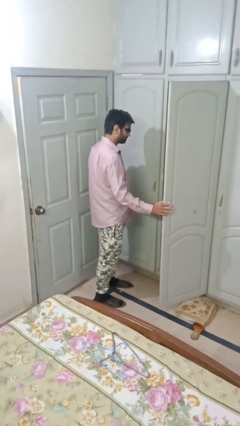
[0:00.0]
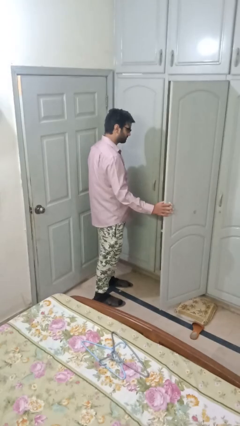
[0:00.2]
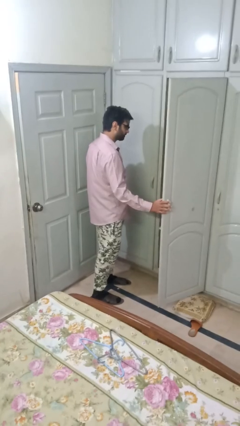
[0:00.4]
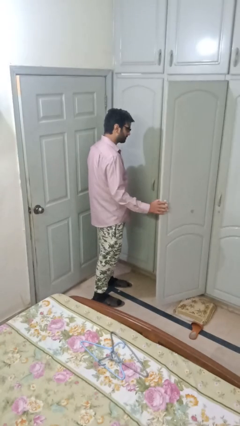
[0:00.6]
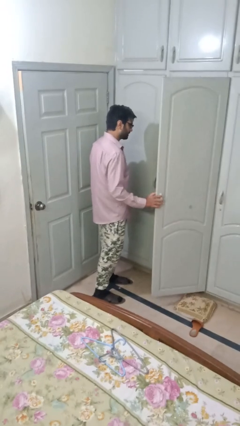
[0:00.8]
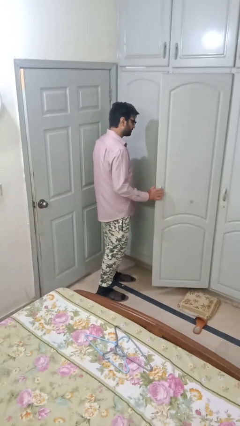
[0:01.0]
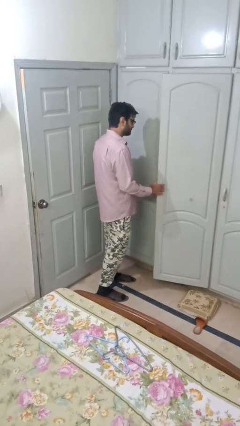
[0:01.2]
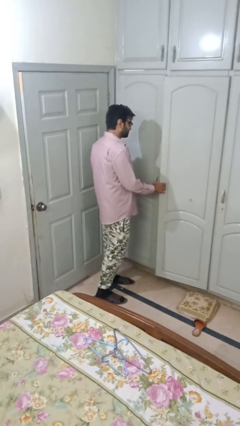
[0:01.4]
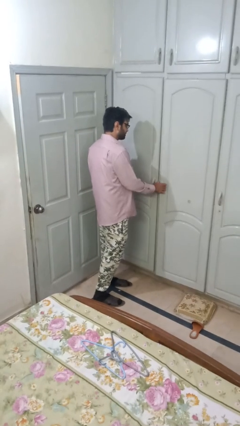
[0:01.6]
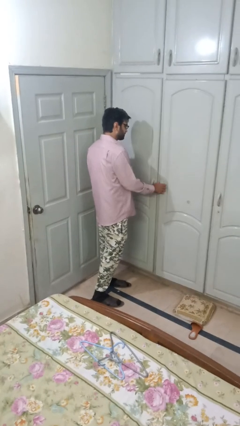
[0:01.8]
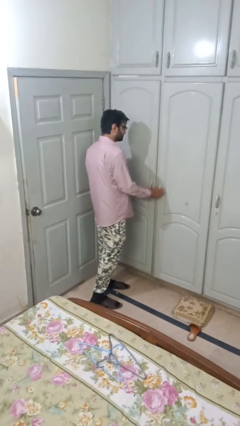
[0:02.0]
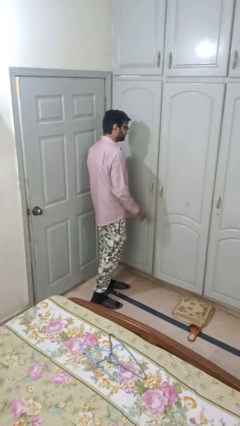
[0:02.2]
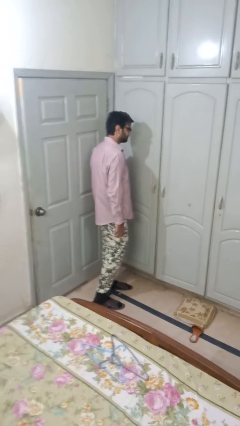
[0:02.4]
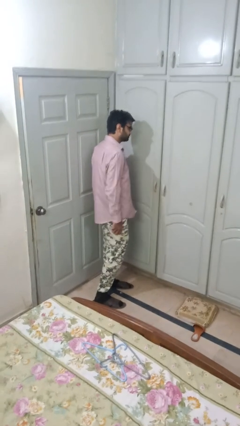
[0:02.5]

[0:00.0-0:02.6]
person closes closet door

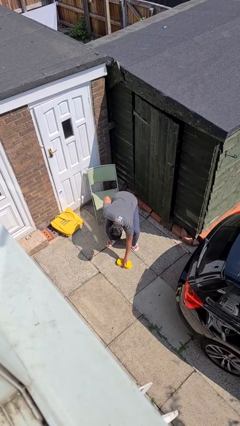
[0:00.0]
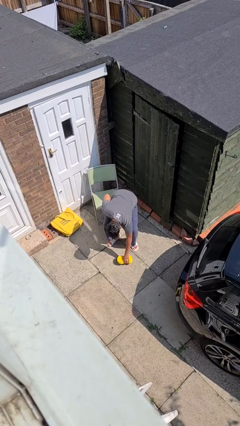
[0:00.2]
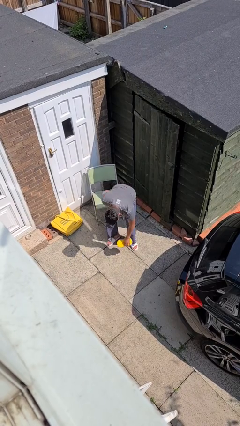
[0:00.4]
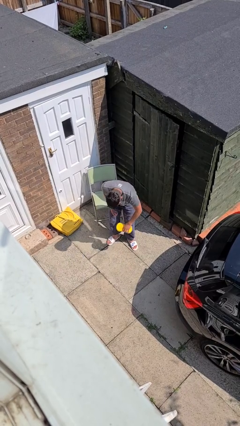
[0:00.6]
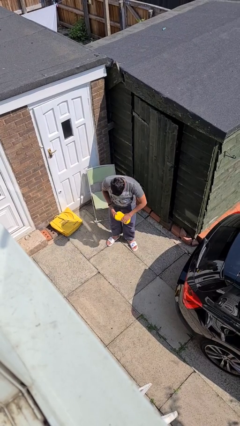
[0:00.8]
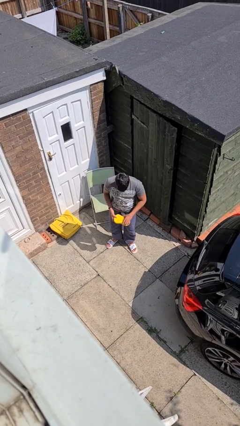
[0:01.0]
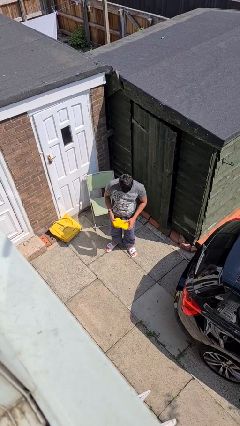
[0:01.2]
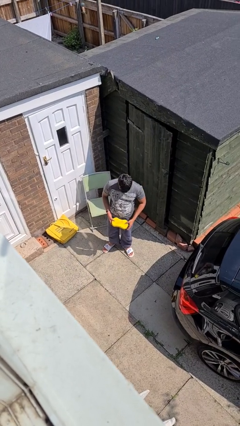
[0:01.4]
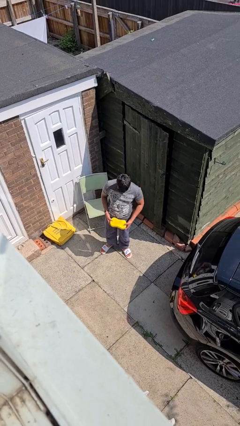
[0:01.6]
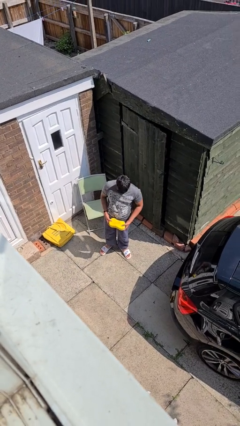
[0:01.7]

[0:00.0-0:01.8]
person picks up object from floor

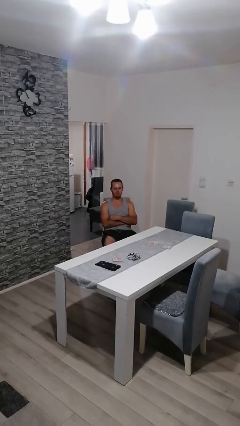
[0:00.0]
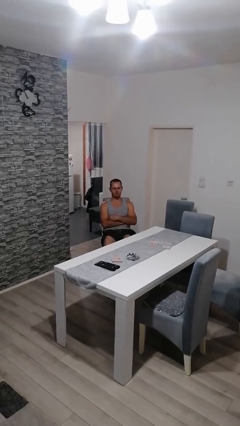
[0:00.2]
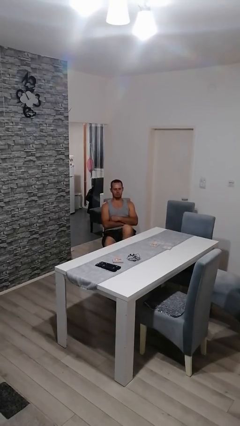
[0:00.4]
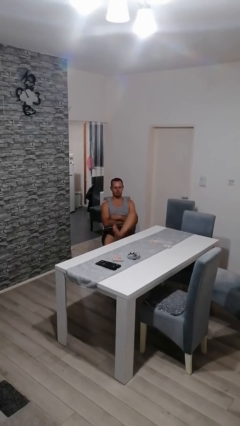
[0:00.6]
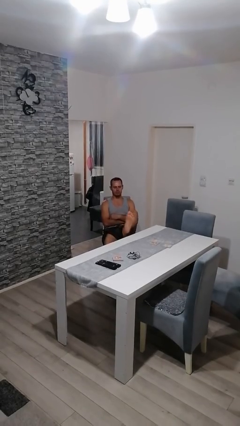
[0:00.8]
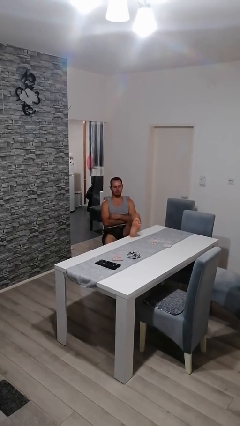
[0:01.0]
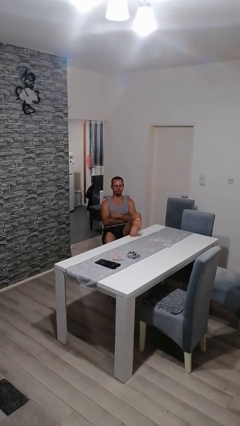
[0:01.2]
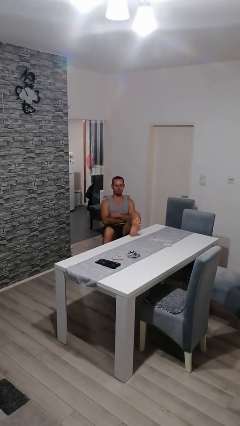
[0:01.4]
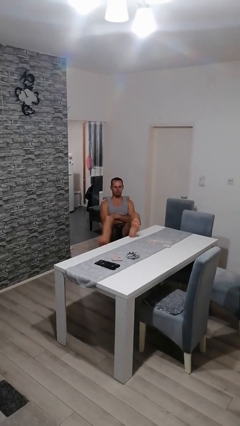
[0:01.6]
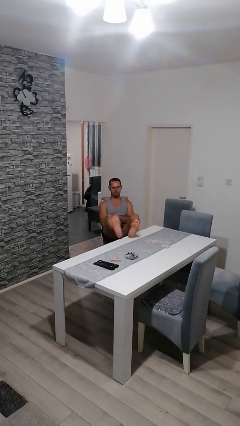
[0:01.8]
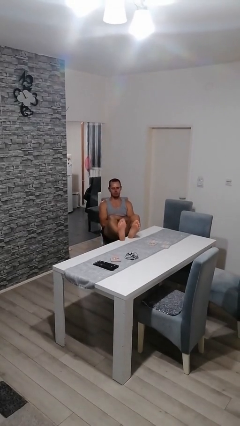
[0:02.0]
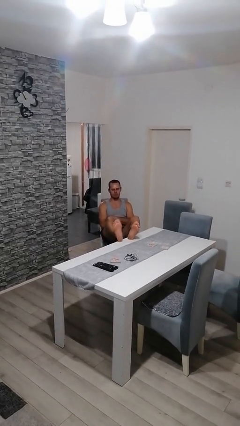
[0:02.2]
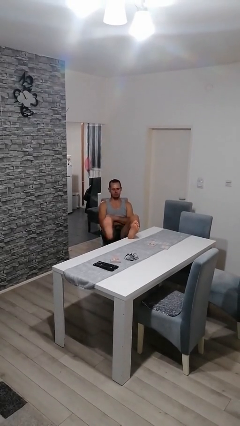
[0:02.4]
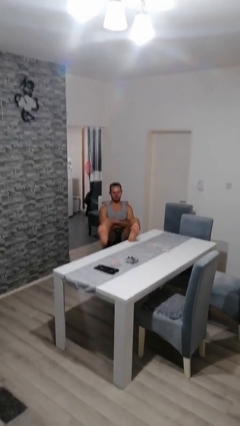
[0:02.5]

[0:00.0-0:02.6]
person puts feet up

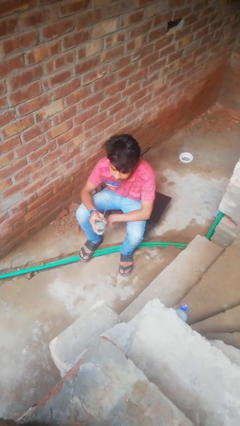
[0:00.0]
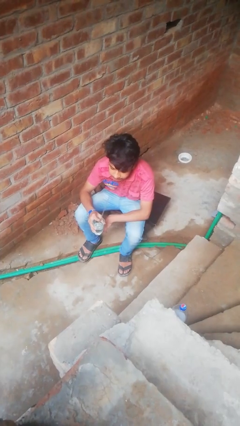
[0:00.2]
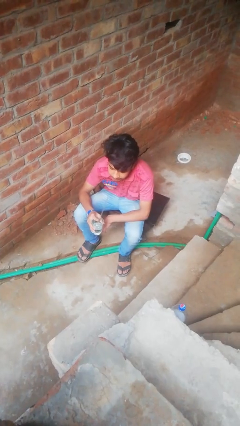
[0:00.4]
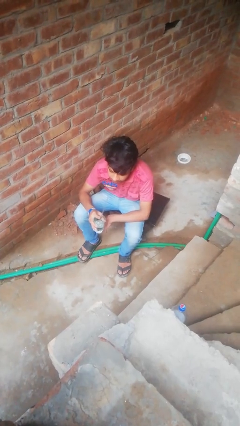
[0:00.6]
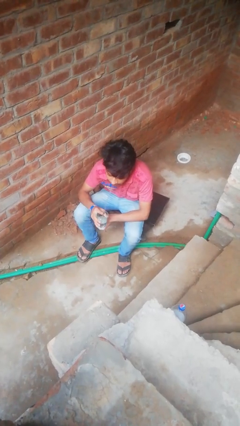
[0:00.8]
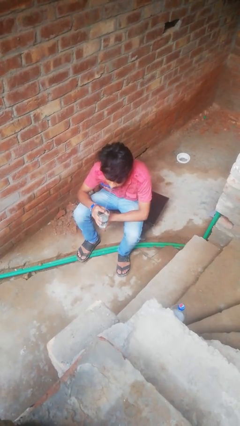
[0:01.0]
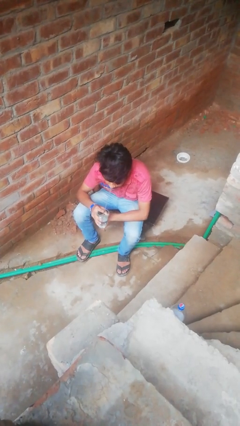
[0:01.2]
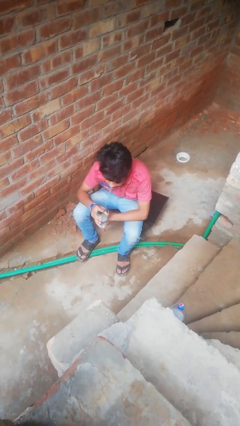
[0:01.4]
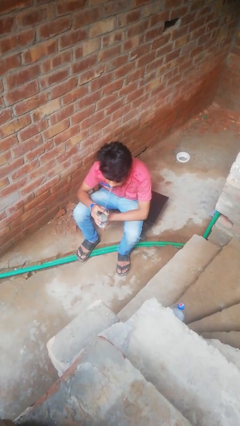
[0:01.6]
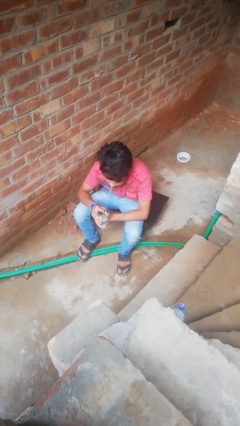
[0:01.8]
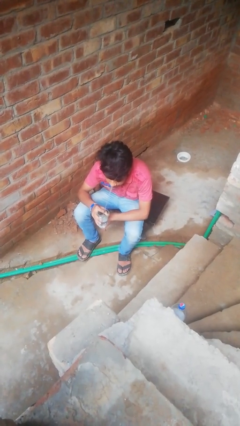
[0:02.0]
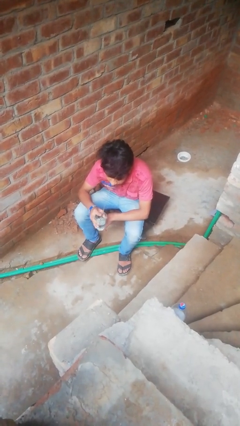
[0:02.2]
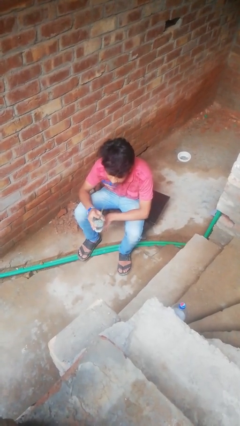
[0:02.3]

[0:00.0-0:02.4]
person drinks from straw

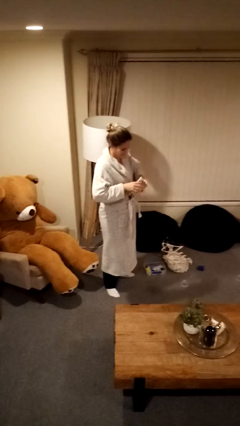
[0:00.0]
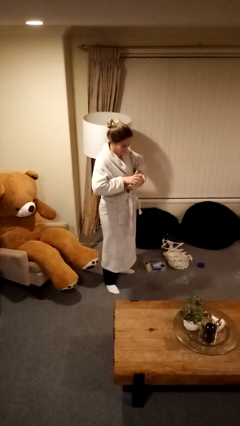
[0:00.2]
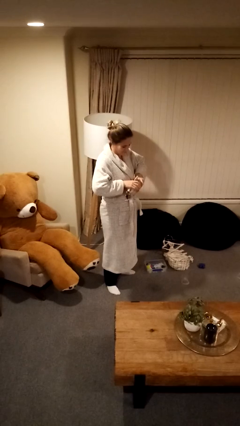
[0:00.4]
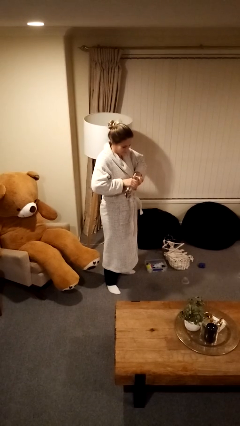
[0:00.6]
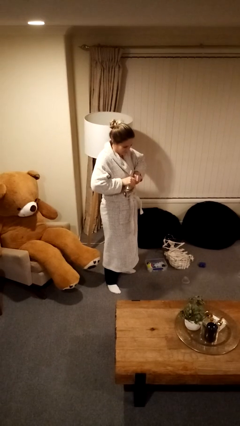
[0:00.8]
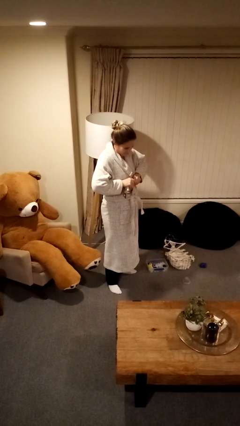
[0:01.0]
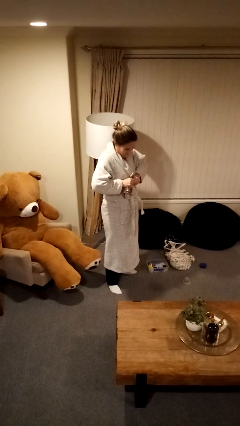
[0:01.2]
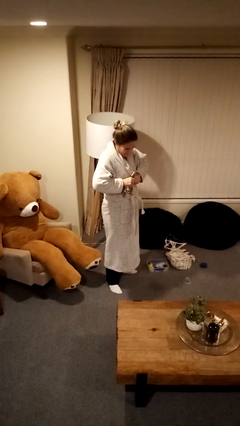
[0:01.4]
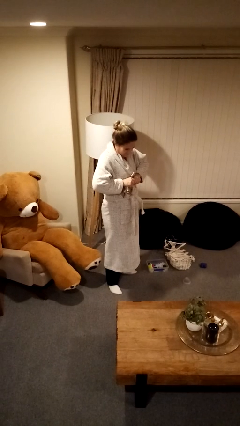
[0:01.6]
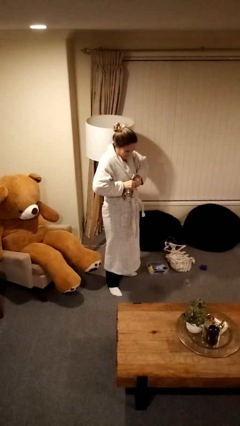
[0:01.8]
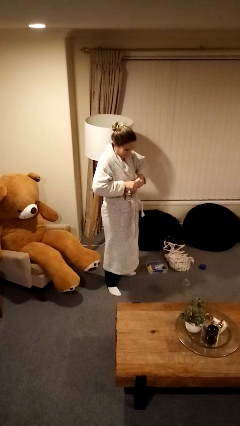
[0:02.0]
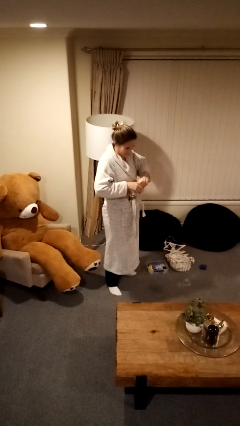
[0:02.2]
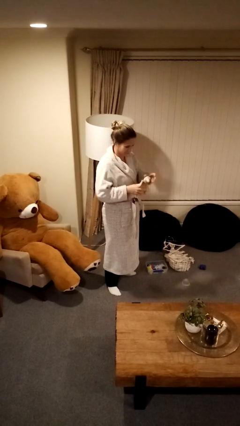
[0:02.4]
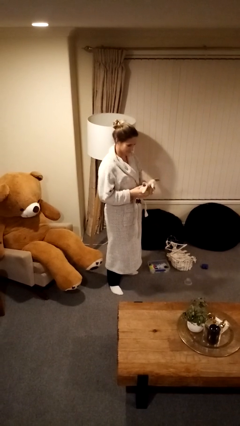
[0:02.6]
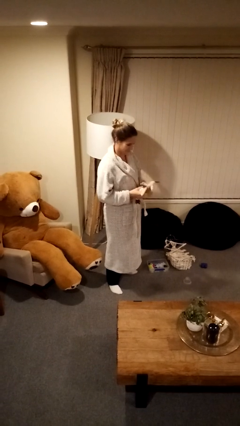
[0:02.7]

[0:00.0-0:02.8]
person squeezes object

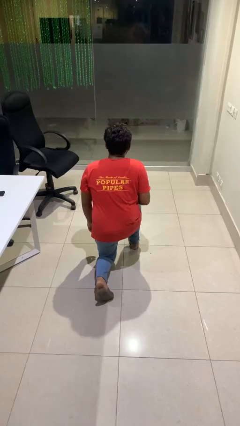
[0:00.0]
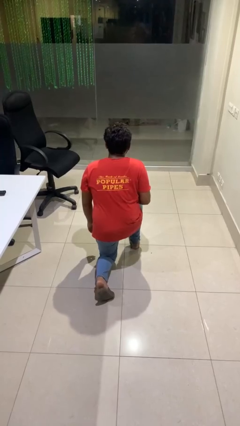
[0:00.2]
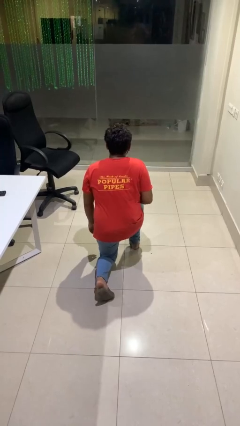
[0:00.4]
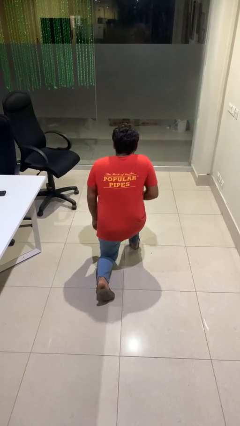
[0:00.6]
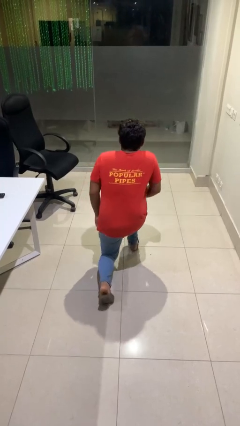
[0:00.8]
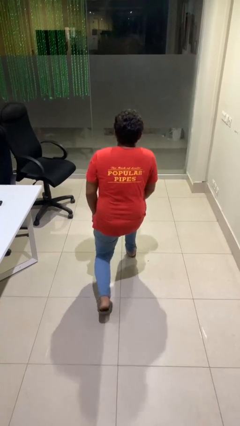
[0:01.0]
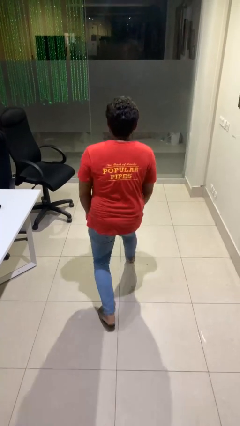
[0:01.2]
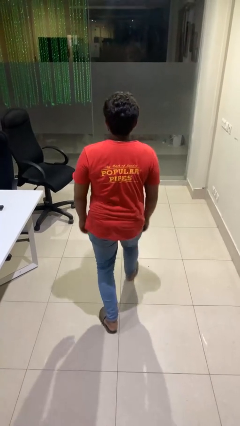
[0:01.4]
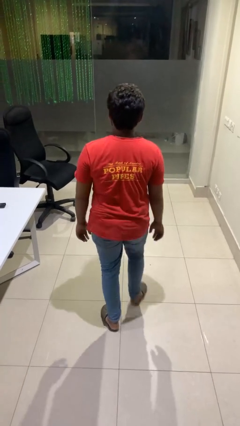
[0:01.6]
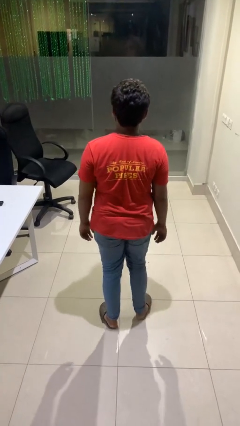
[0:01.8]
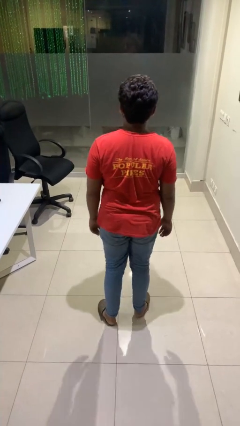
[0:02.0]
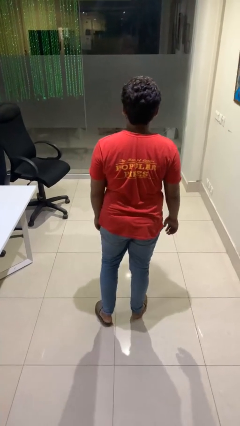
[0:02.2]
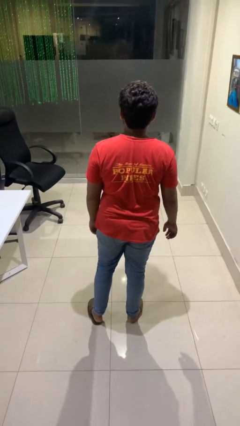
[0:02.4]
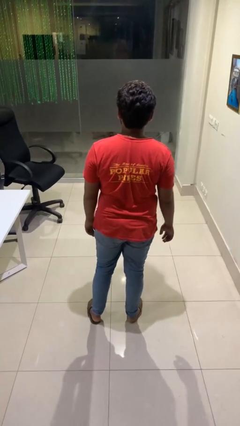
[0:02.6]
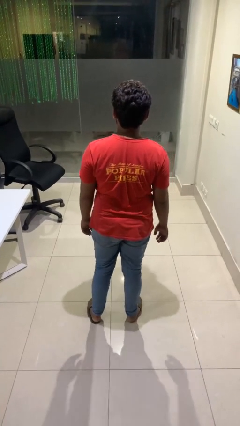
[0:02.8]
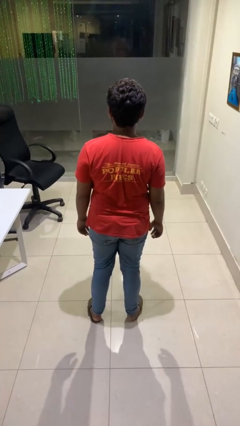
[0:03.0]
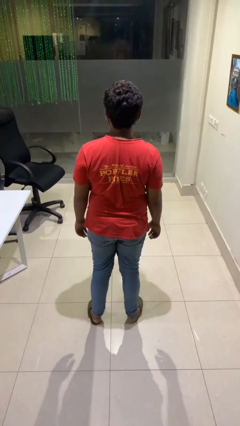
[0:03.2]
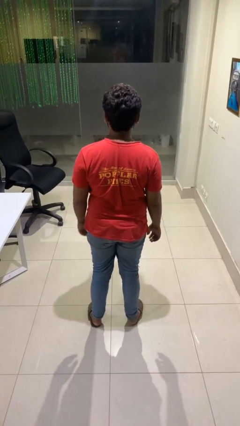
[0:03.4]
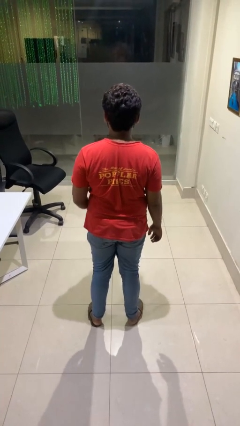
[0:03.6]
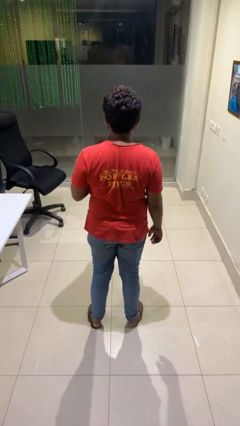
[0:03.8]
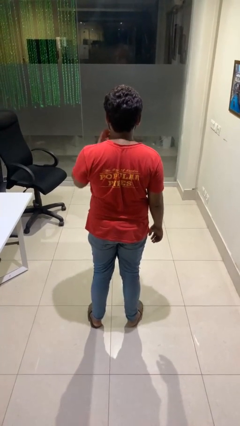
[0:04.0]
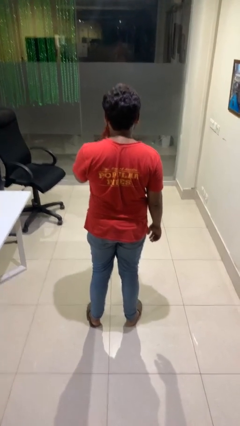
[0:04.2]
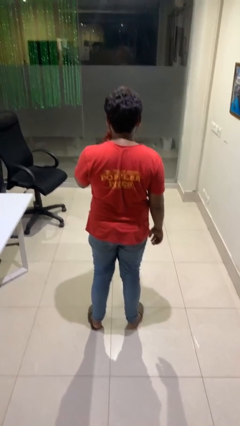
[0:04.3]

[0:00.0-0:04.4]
person stands up from floor

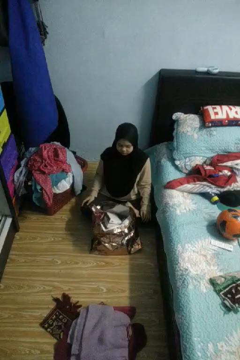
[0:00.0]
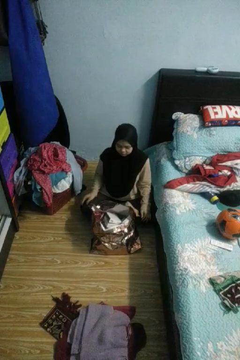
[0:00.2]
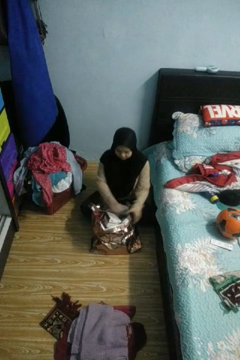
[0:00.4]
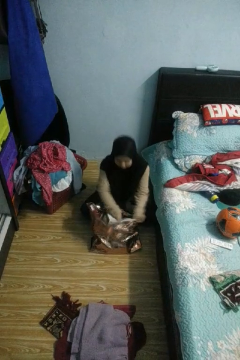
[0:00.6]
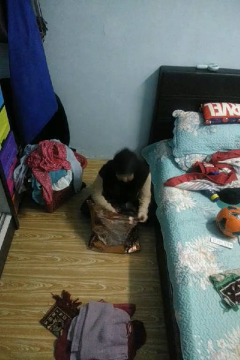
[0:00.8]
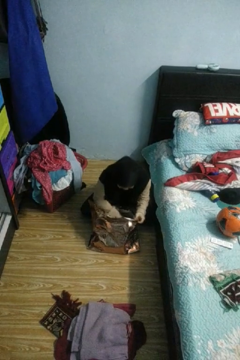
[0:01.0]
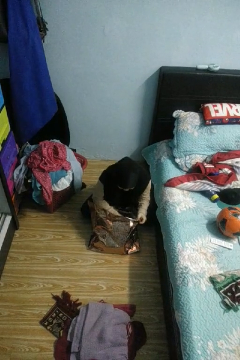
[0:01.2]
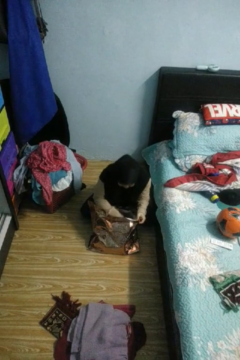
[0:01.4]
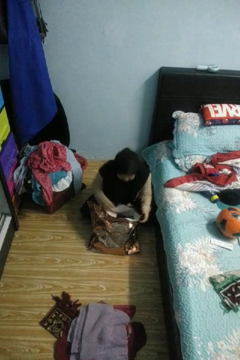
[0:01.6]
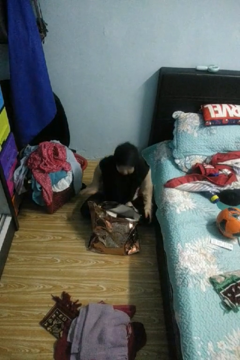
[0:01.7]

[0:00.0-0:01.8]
person searches in bag
